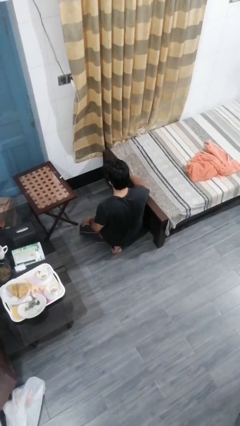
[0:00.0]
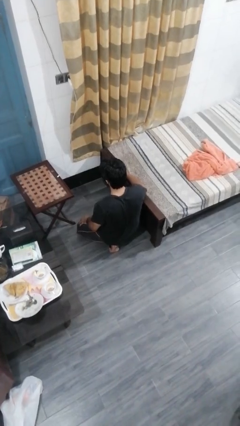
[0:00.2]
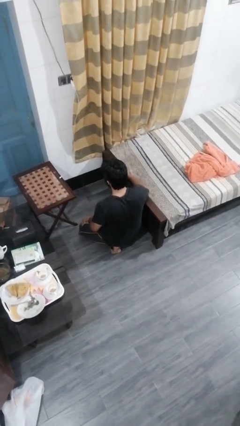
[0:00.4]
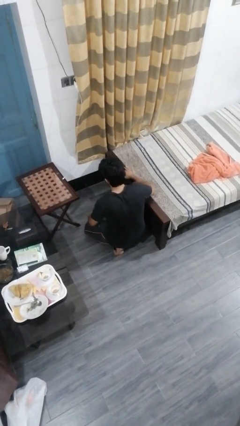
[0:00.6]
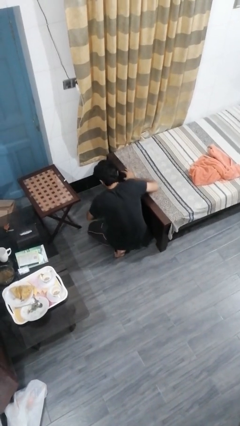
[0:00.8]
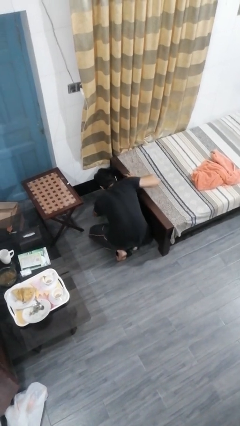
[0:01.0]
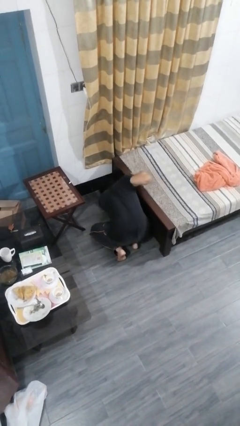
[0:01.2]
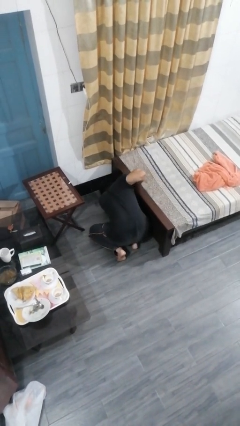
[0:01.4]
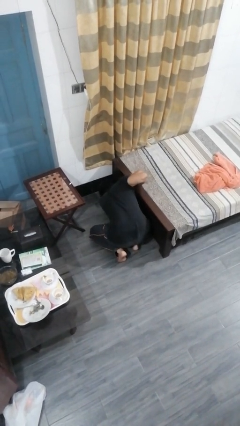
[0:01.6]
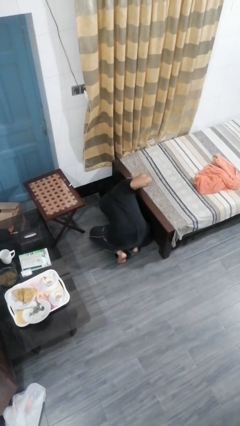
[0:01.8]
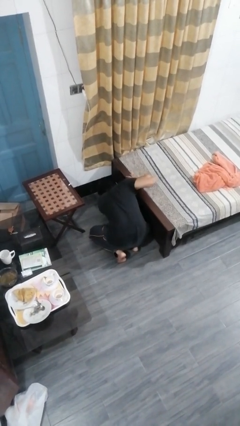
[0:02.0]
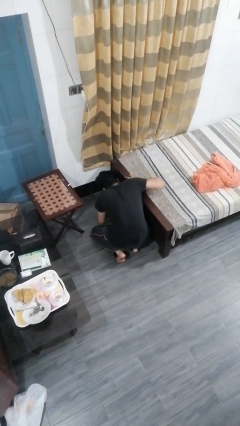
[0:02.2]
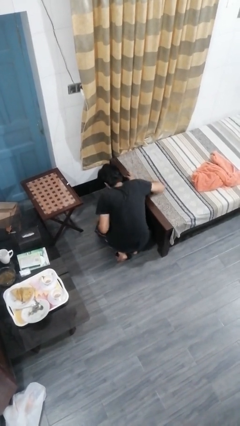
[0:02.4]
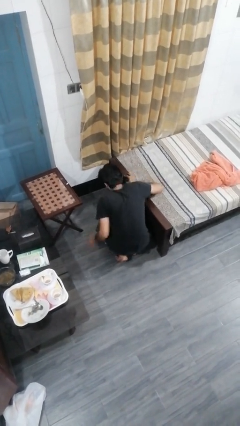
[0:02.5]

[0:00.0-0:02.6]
person searches under bed

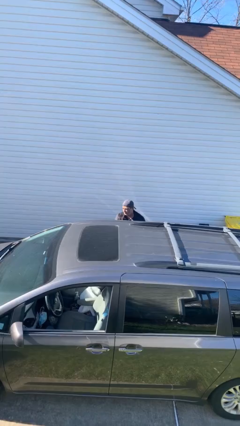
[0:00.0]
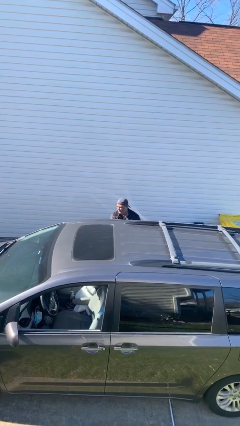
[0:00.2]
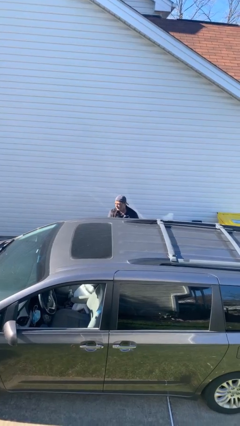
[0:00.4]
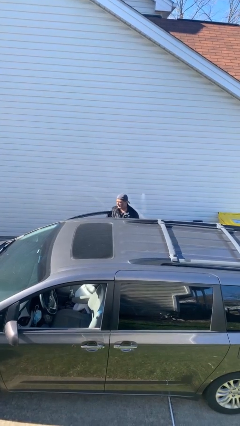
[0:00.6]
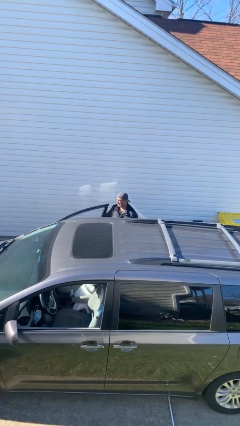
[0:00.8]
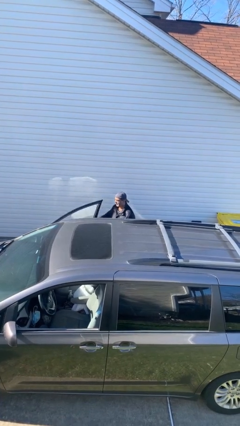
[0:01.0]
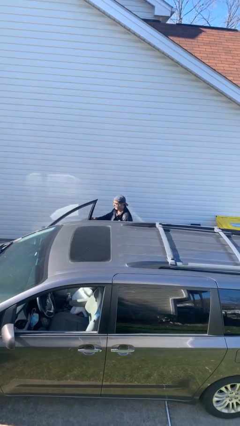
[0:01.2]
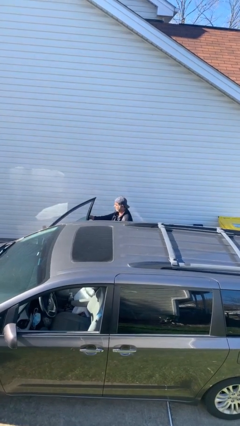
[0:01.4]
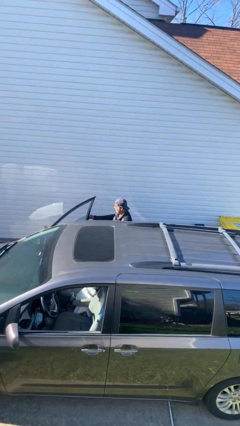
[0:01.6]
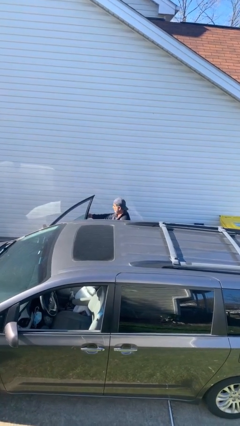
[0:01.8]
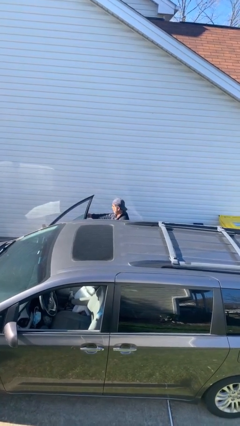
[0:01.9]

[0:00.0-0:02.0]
person opens car door

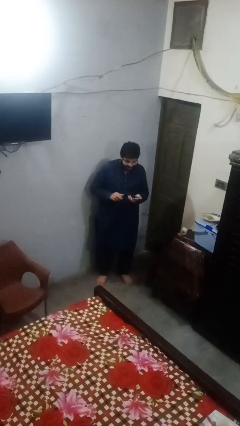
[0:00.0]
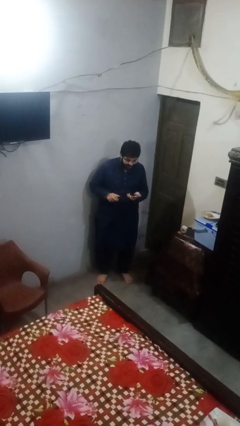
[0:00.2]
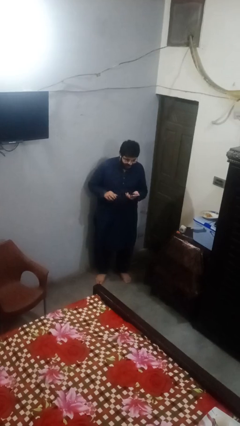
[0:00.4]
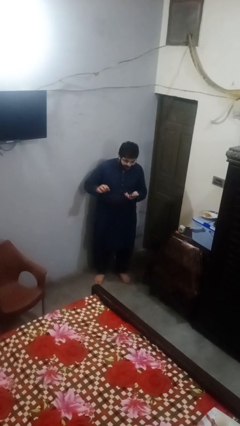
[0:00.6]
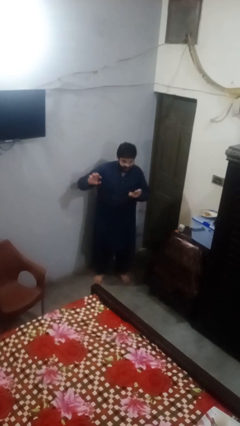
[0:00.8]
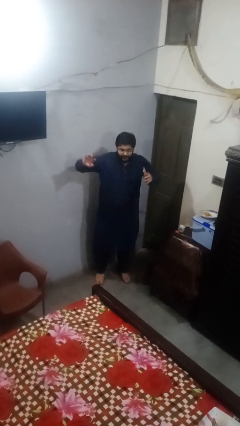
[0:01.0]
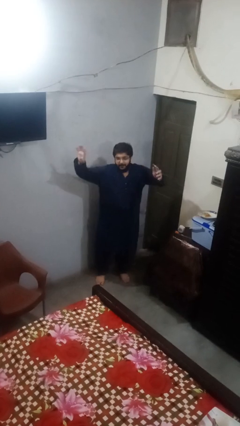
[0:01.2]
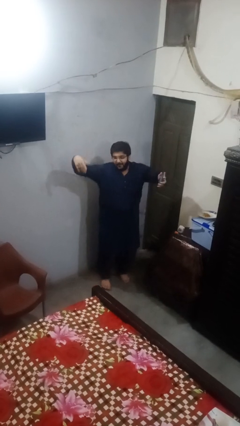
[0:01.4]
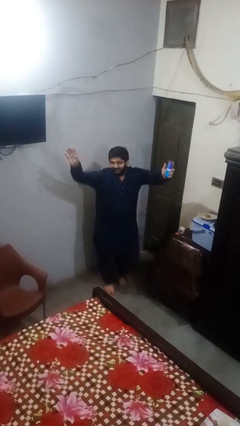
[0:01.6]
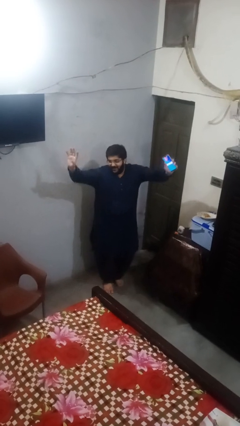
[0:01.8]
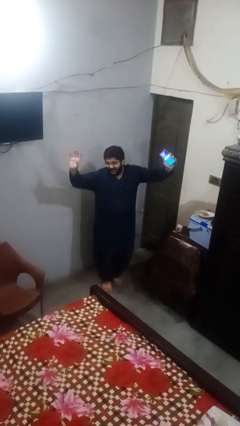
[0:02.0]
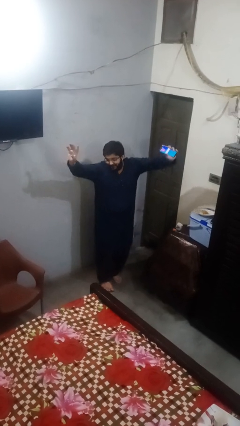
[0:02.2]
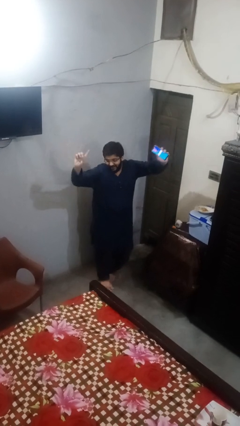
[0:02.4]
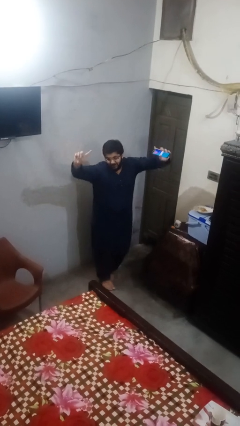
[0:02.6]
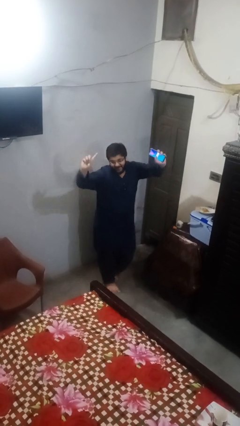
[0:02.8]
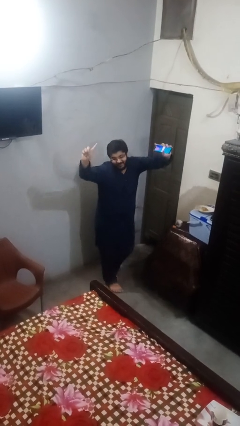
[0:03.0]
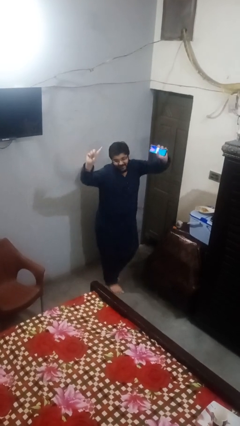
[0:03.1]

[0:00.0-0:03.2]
person dances in place

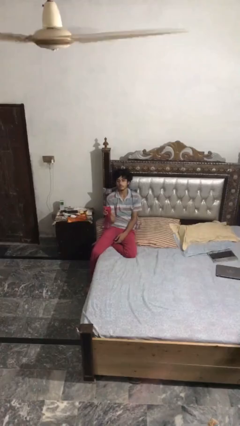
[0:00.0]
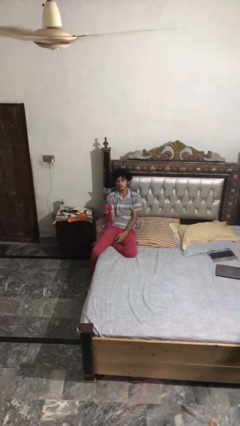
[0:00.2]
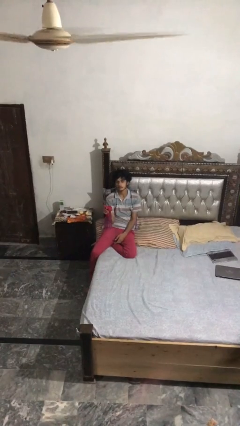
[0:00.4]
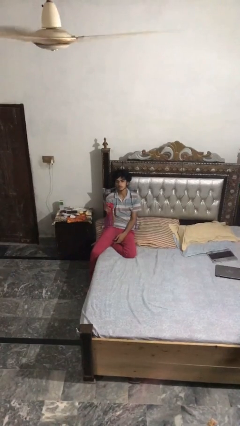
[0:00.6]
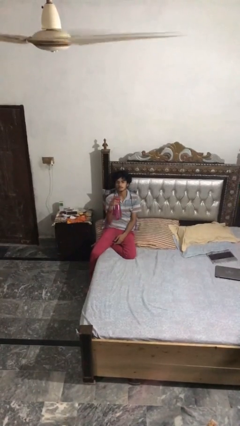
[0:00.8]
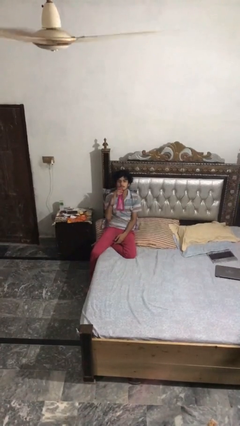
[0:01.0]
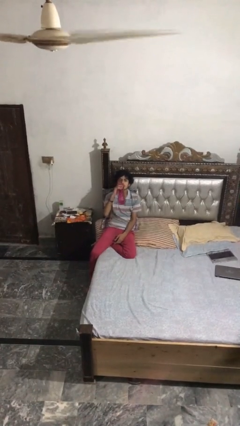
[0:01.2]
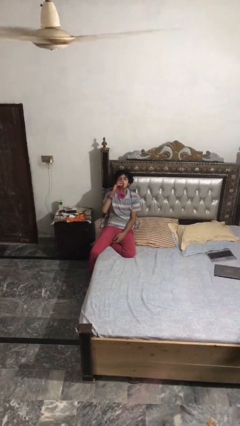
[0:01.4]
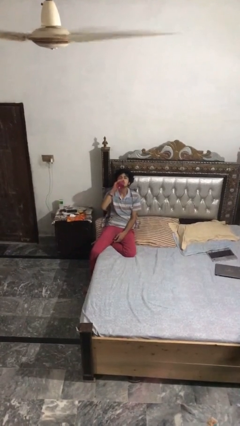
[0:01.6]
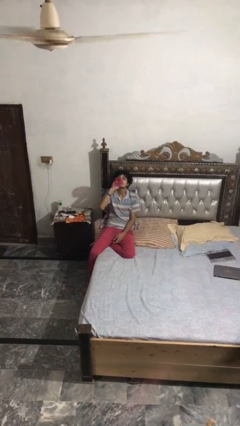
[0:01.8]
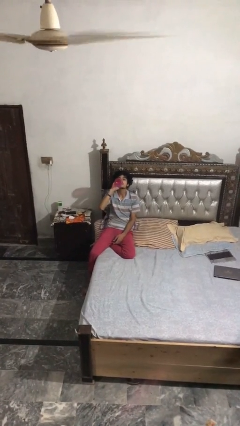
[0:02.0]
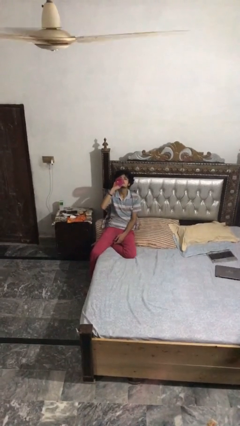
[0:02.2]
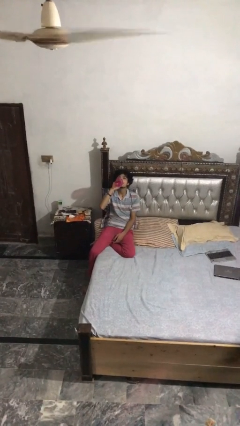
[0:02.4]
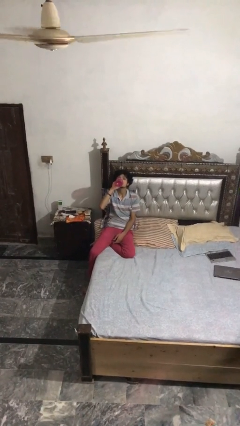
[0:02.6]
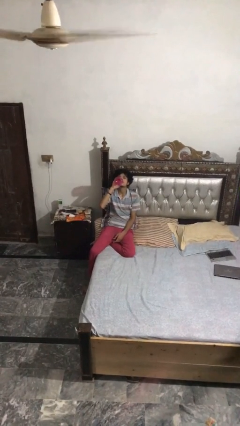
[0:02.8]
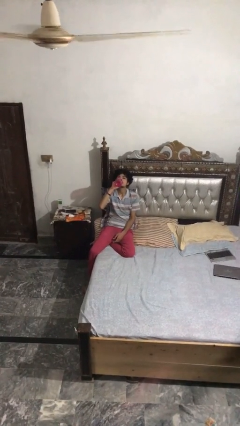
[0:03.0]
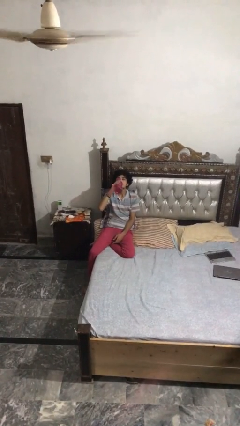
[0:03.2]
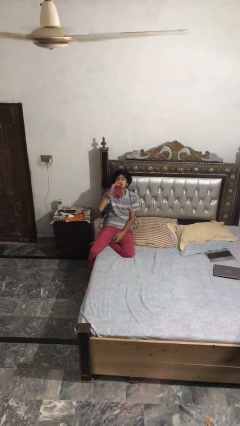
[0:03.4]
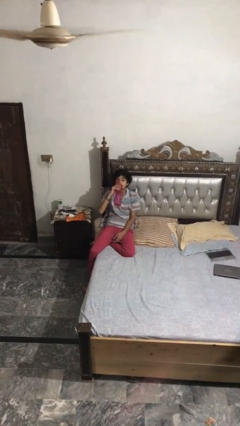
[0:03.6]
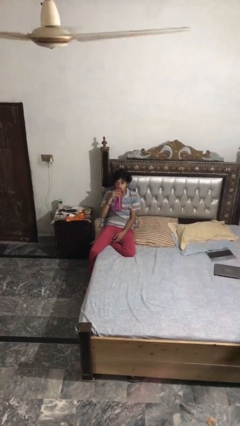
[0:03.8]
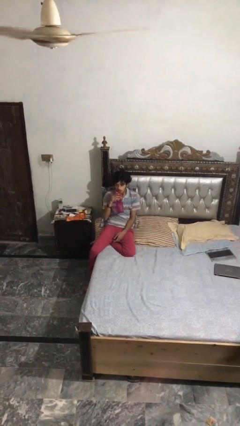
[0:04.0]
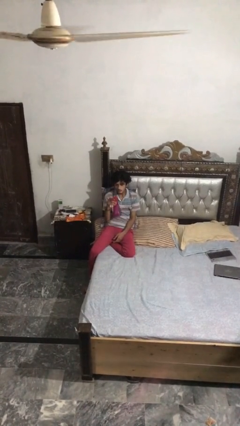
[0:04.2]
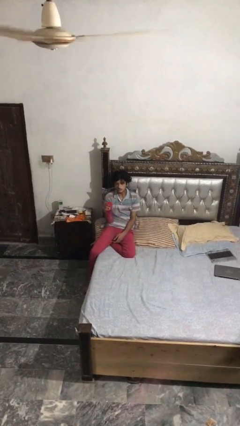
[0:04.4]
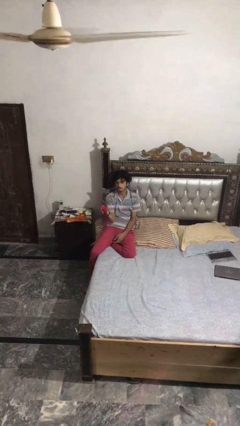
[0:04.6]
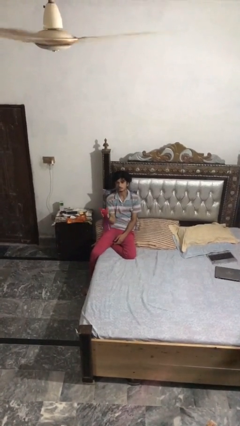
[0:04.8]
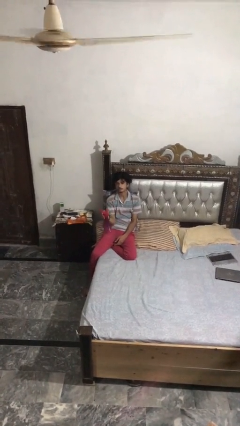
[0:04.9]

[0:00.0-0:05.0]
person drinks from bottle

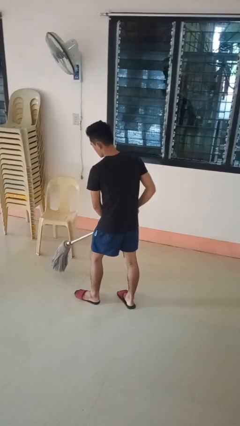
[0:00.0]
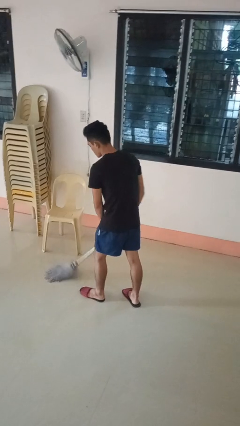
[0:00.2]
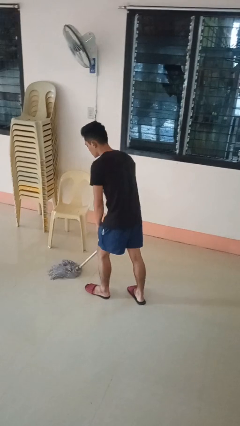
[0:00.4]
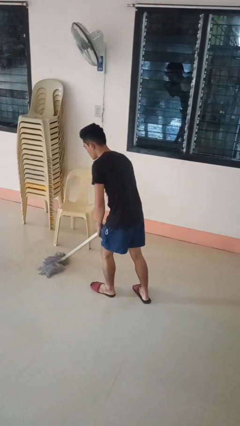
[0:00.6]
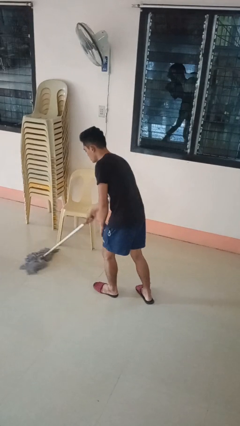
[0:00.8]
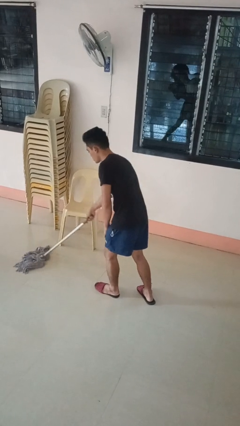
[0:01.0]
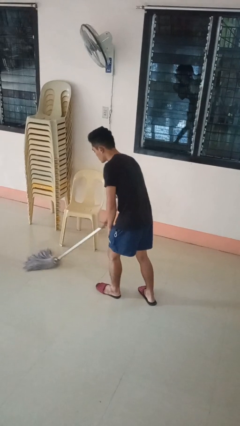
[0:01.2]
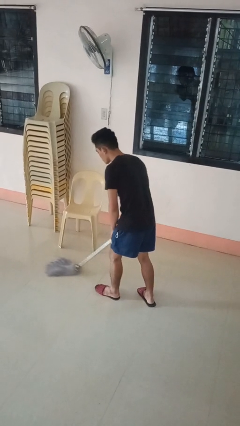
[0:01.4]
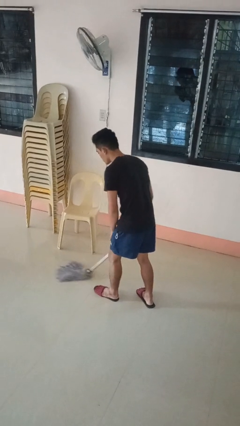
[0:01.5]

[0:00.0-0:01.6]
person mops

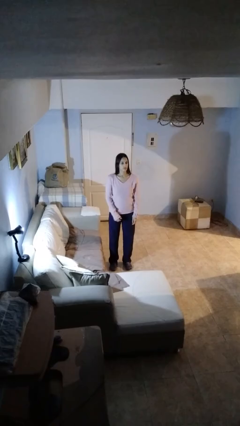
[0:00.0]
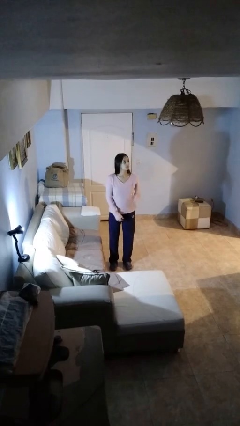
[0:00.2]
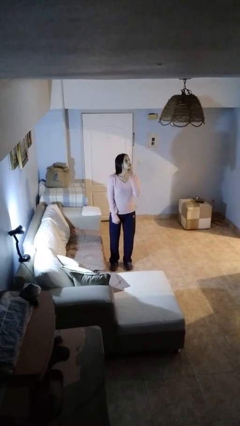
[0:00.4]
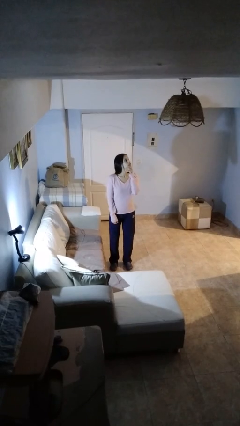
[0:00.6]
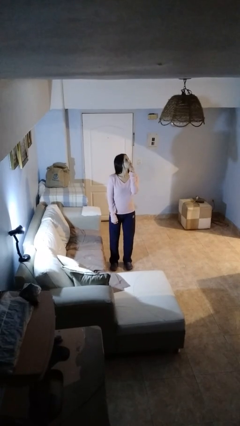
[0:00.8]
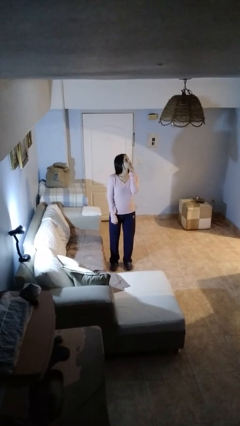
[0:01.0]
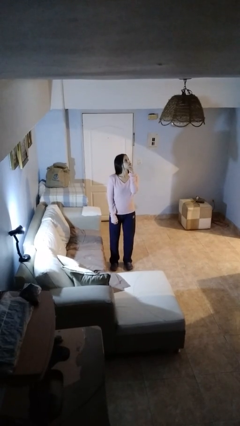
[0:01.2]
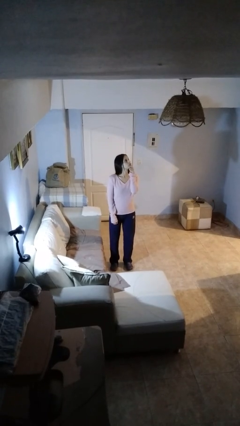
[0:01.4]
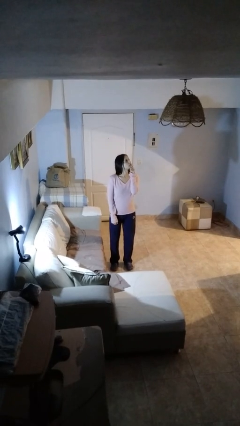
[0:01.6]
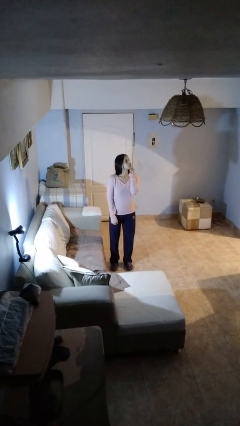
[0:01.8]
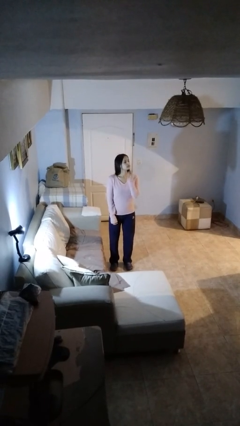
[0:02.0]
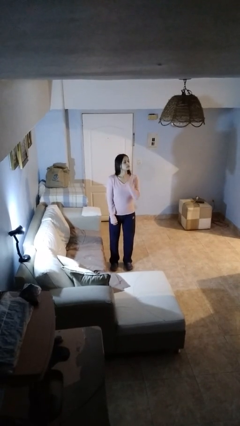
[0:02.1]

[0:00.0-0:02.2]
person strokes chin

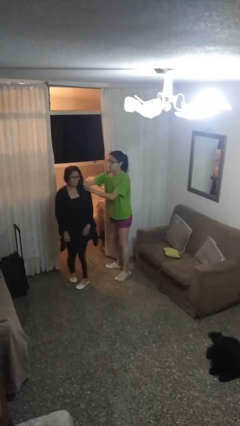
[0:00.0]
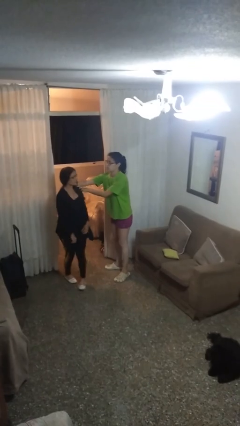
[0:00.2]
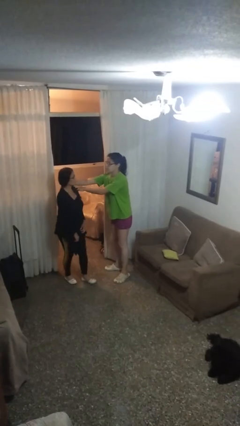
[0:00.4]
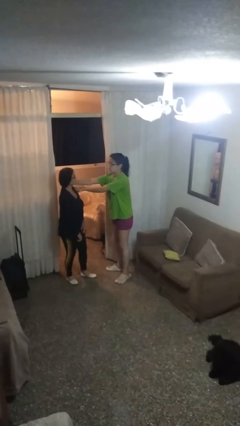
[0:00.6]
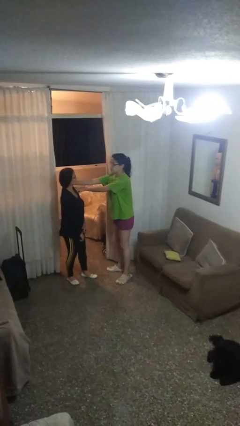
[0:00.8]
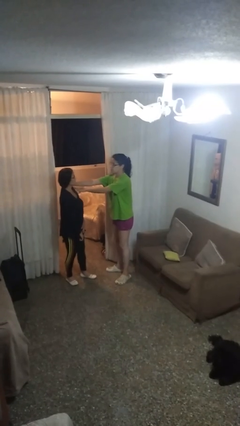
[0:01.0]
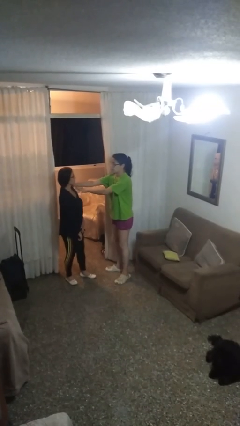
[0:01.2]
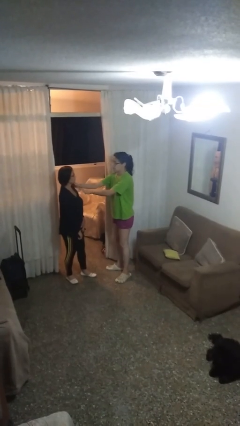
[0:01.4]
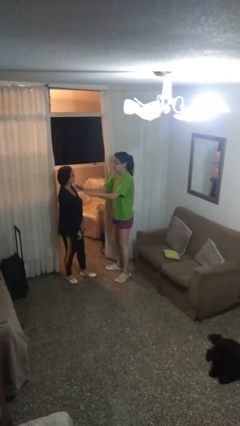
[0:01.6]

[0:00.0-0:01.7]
person spins person around
